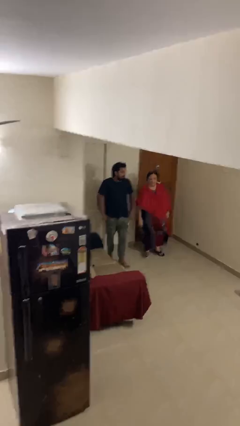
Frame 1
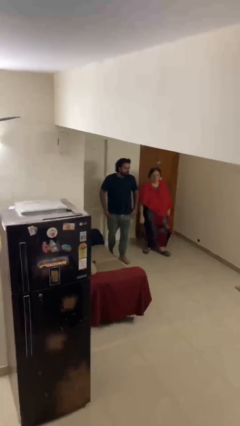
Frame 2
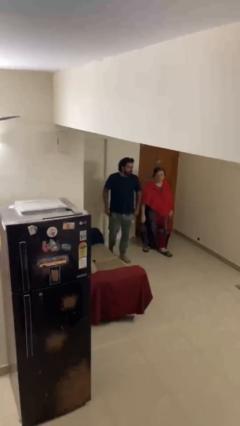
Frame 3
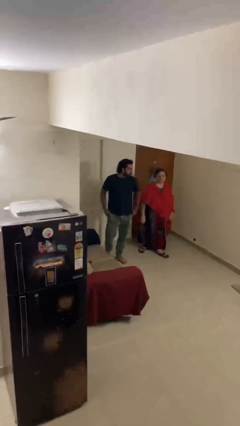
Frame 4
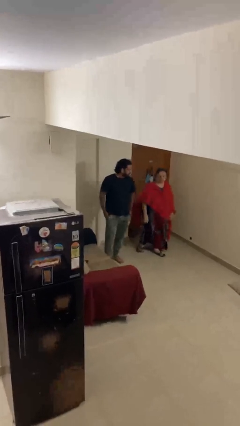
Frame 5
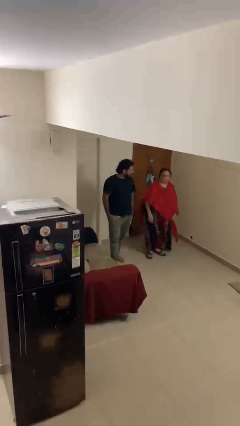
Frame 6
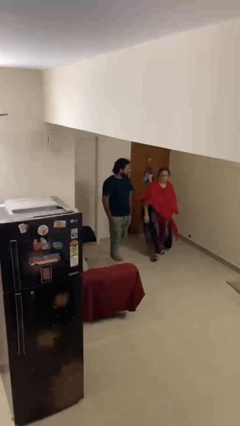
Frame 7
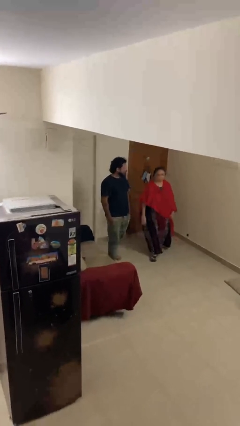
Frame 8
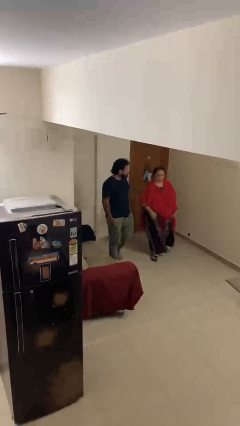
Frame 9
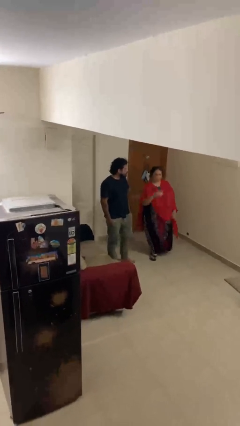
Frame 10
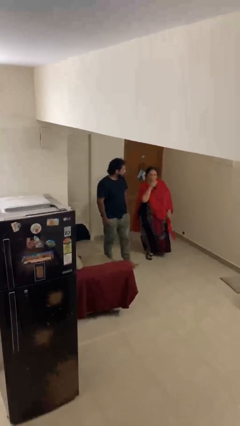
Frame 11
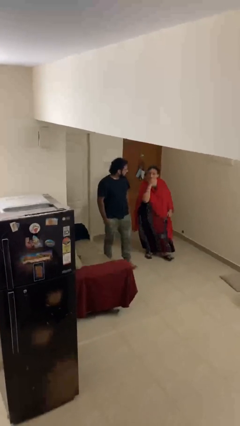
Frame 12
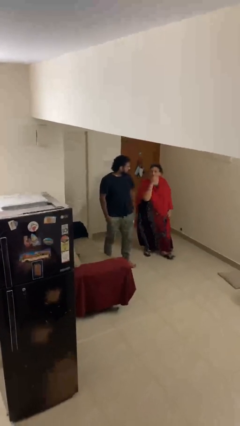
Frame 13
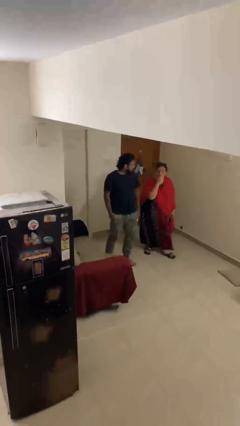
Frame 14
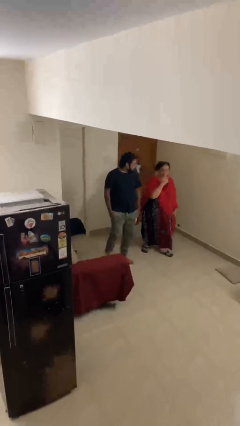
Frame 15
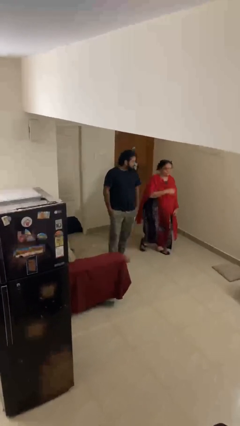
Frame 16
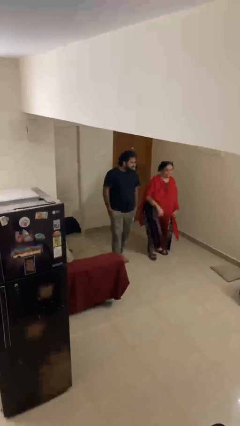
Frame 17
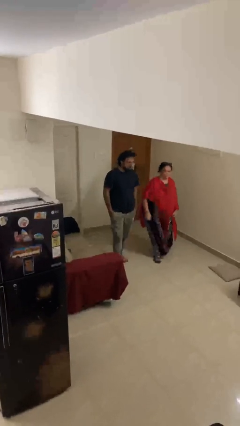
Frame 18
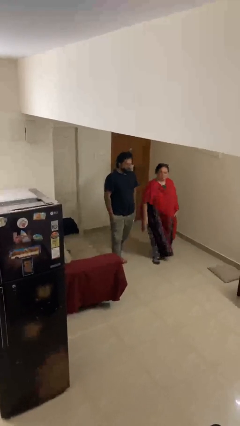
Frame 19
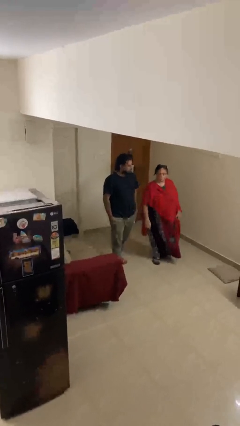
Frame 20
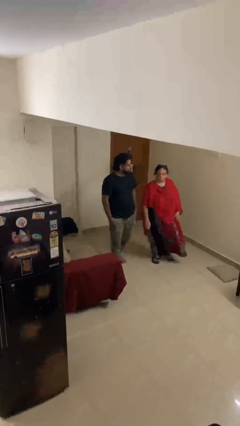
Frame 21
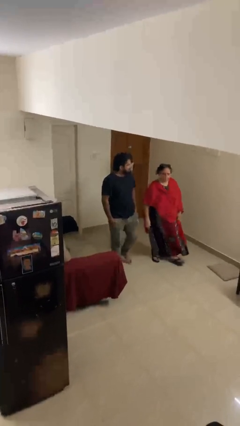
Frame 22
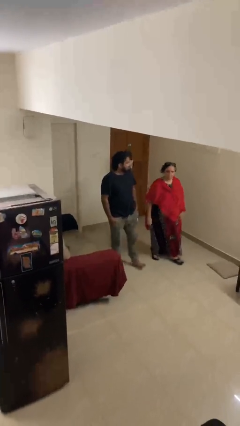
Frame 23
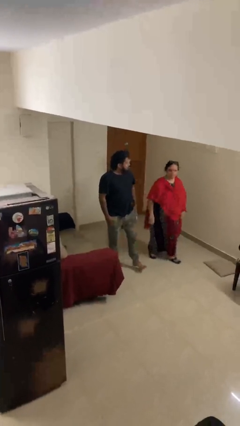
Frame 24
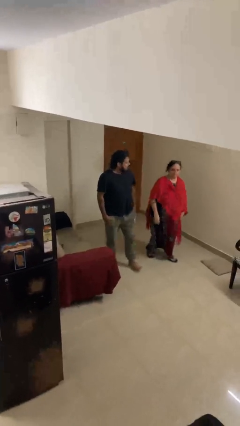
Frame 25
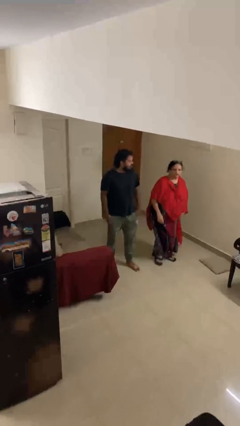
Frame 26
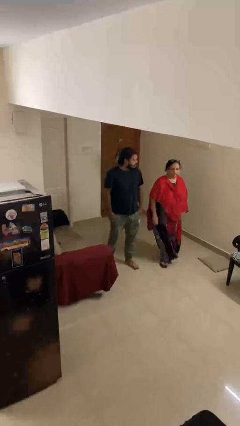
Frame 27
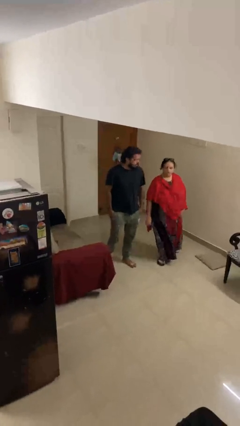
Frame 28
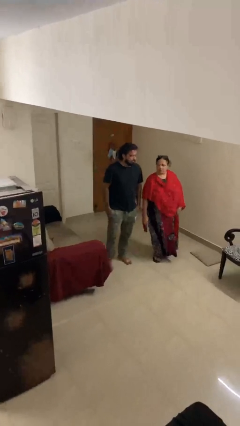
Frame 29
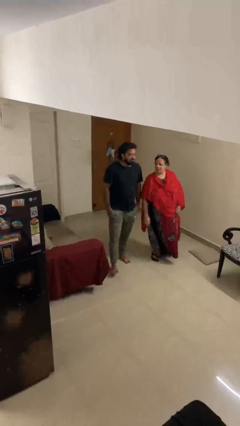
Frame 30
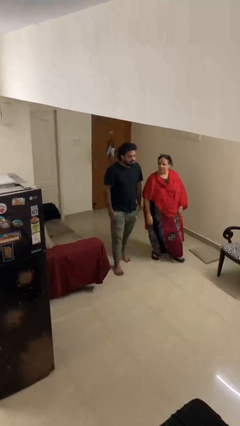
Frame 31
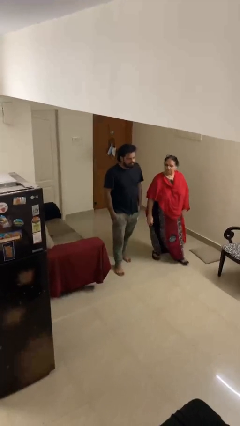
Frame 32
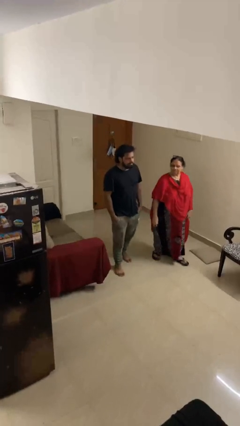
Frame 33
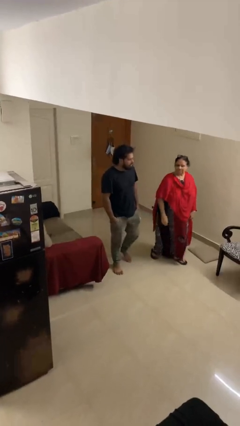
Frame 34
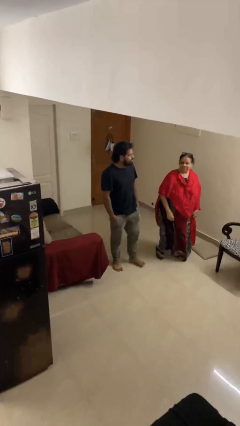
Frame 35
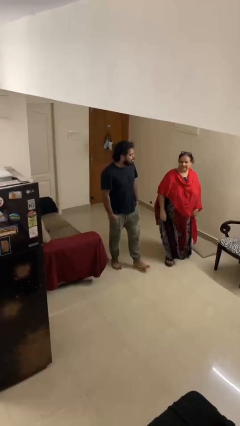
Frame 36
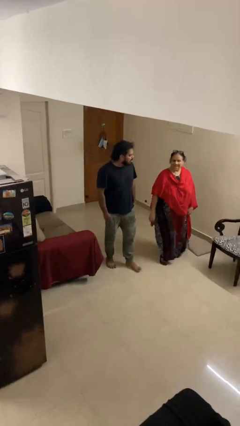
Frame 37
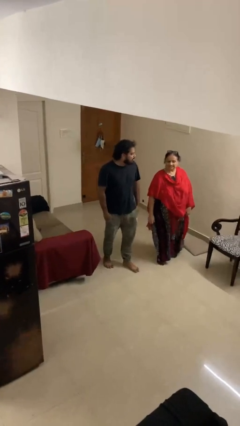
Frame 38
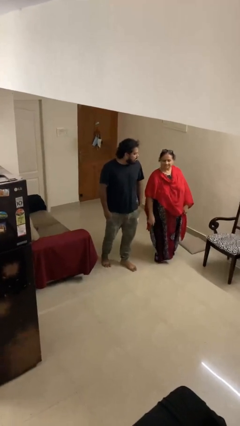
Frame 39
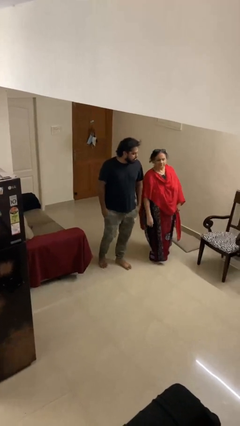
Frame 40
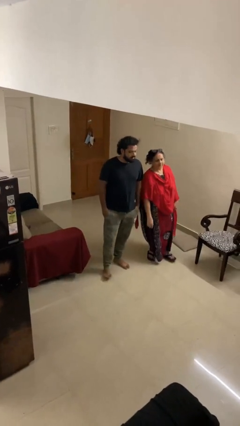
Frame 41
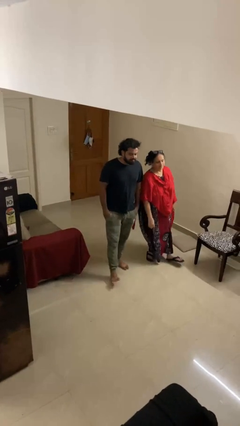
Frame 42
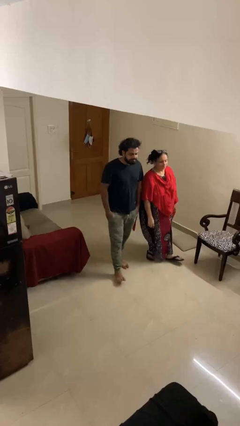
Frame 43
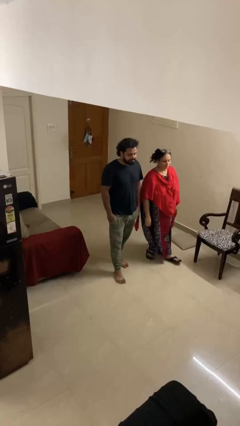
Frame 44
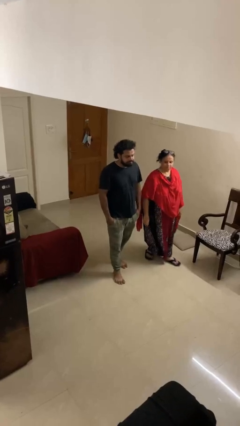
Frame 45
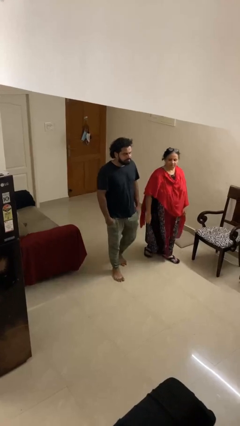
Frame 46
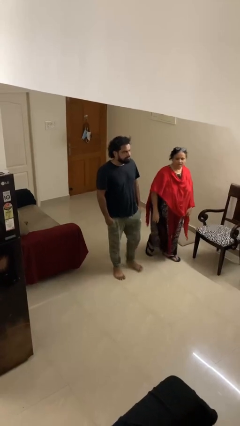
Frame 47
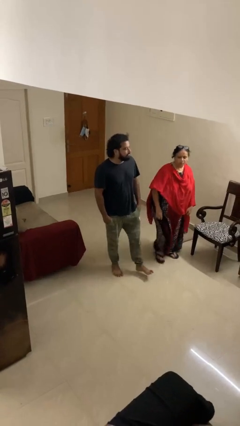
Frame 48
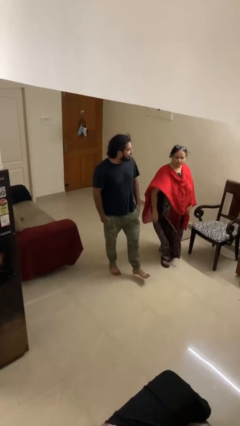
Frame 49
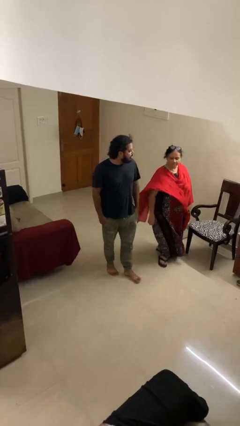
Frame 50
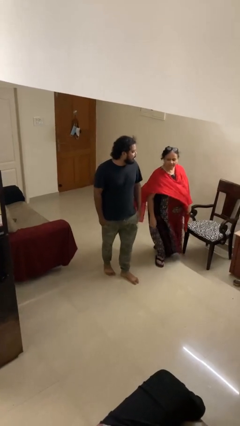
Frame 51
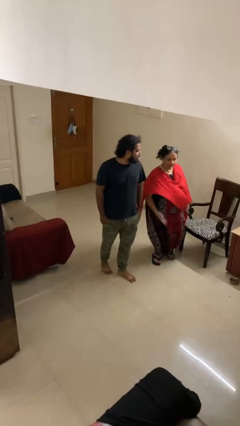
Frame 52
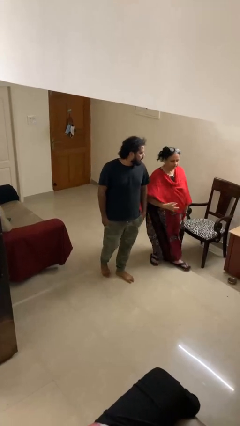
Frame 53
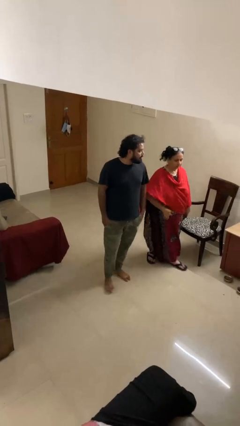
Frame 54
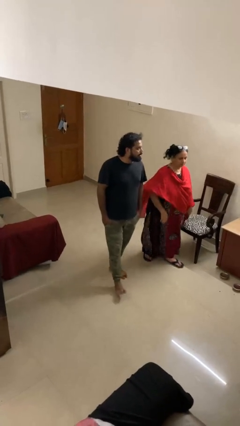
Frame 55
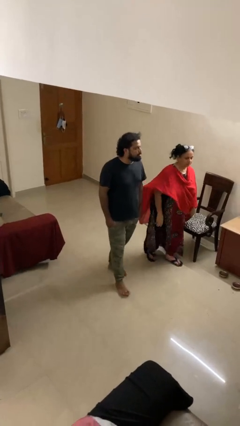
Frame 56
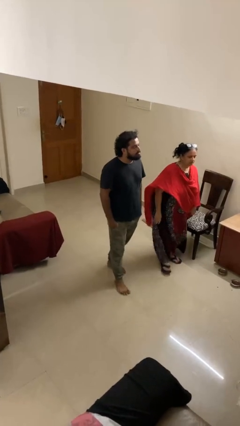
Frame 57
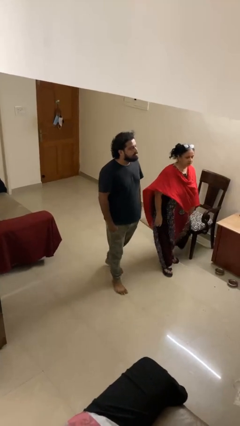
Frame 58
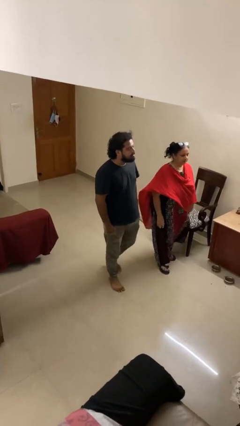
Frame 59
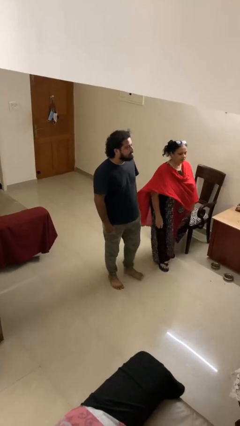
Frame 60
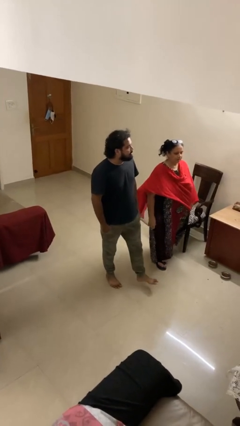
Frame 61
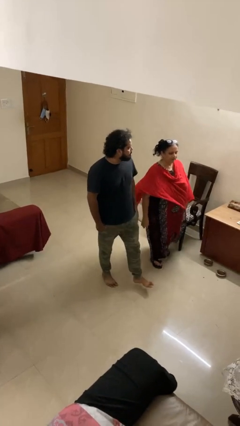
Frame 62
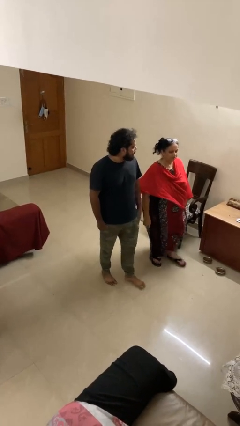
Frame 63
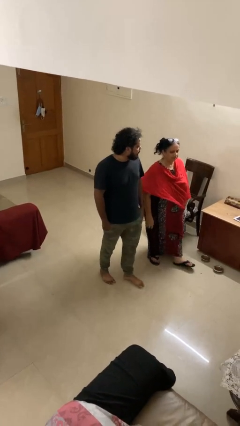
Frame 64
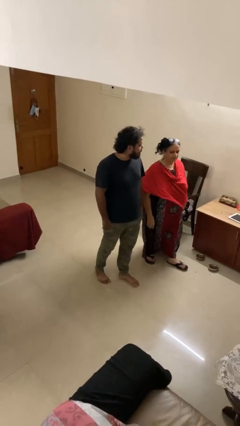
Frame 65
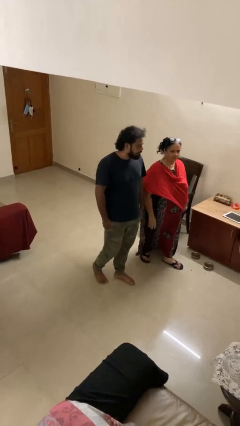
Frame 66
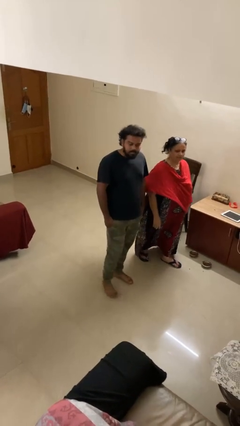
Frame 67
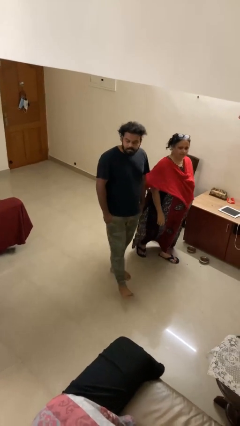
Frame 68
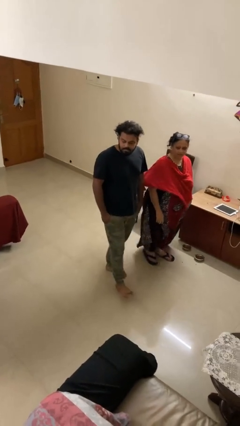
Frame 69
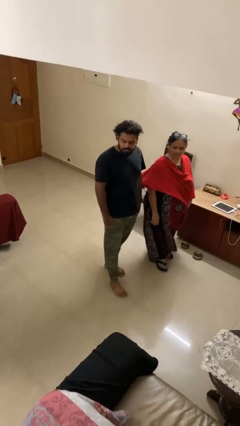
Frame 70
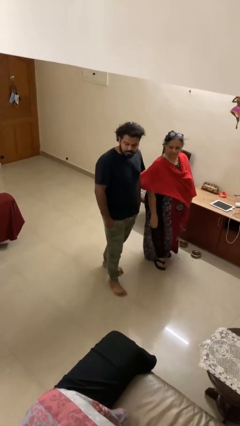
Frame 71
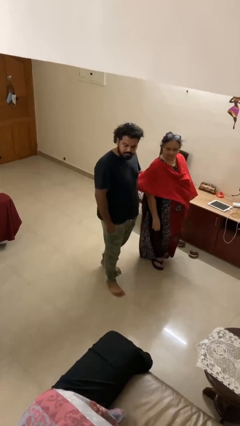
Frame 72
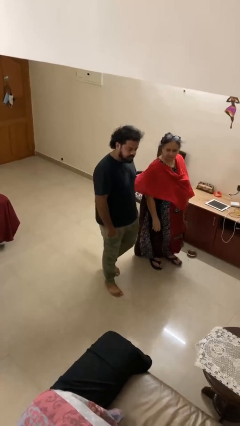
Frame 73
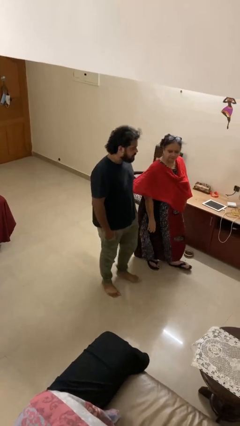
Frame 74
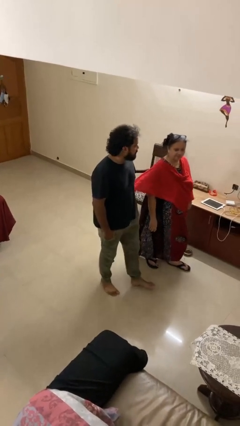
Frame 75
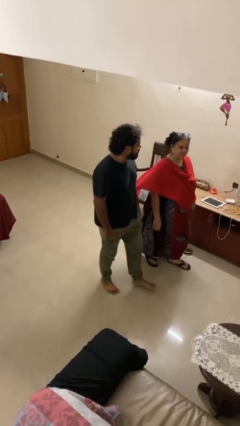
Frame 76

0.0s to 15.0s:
person talks to person

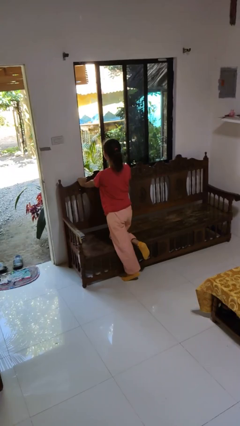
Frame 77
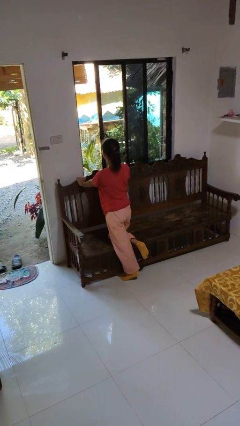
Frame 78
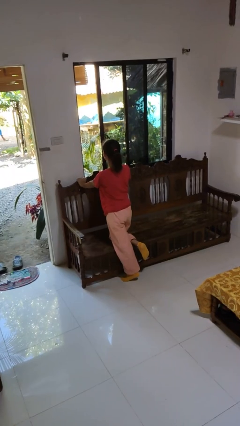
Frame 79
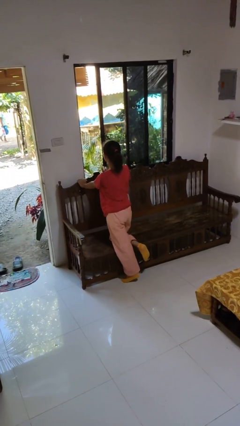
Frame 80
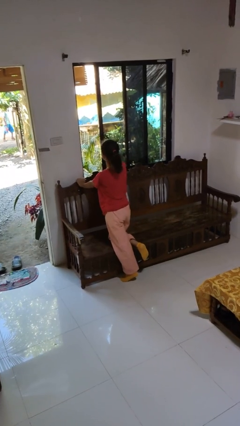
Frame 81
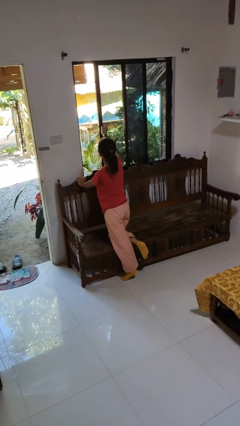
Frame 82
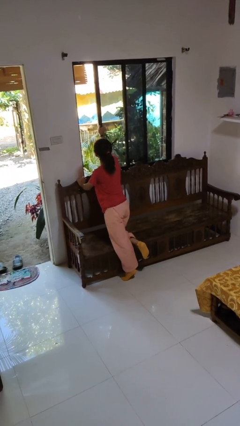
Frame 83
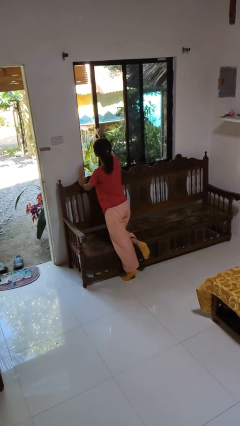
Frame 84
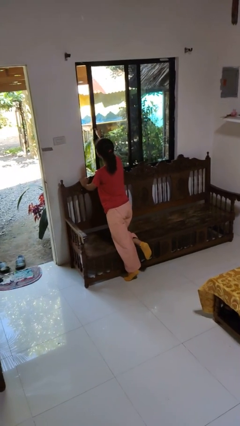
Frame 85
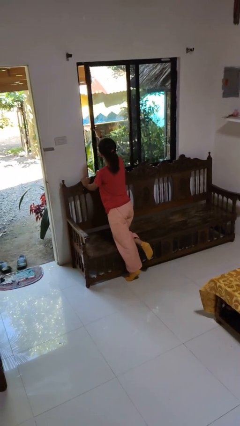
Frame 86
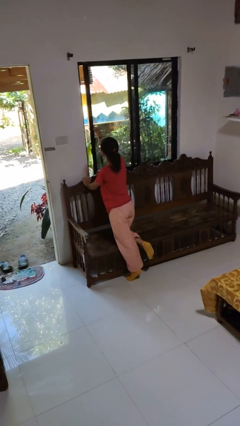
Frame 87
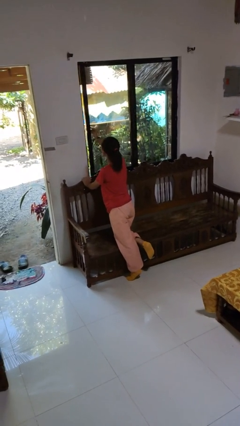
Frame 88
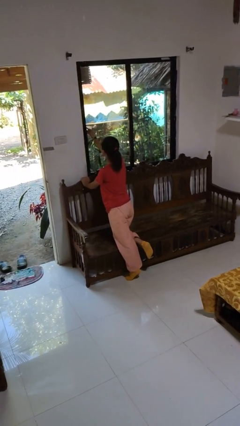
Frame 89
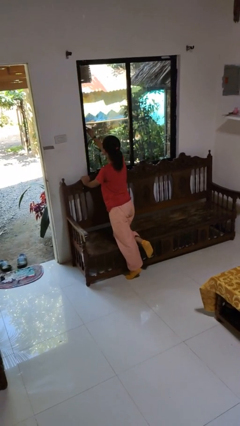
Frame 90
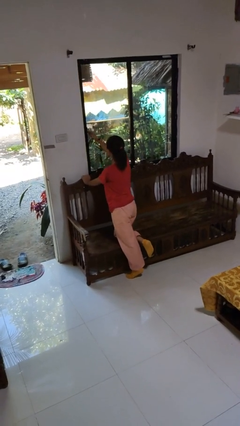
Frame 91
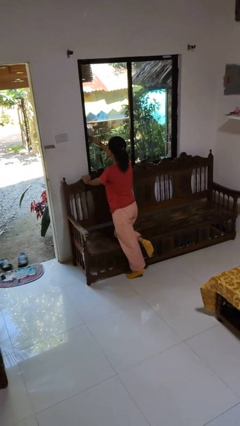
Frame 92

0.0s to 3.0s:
person closes home window
